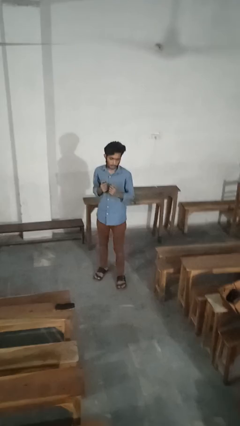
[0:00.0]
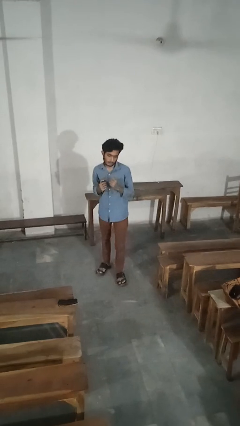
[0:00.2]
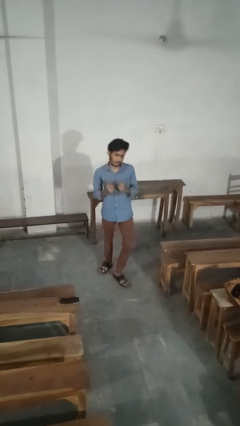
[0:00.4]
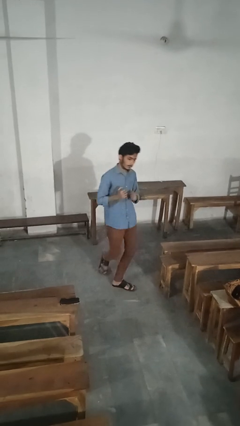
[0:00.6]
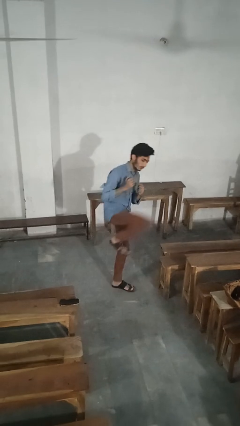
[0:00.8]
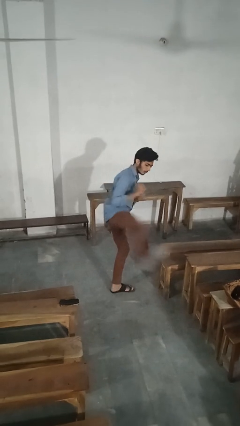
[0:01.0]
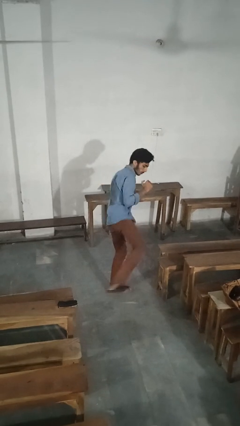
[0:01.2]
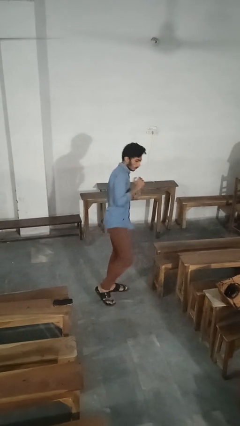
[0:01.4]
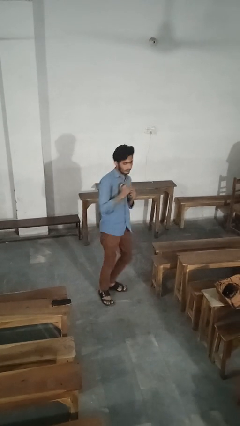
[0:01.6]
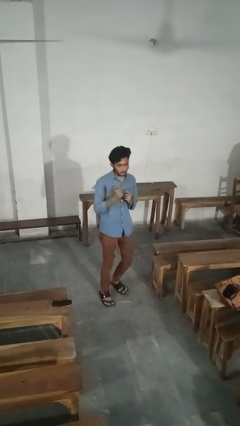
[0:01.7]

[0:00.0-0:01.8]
person karate kicks

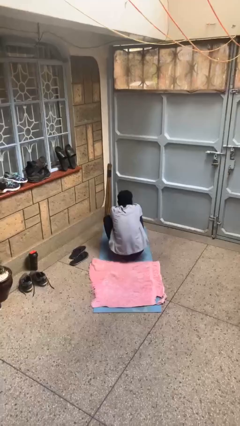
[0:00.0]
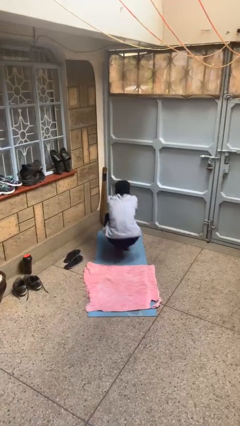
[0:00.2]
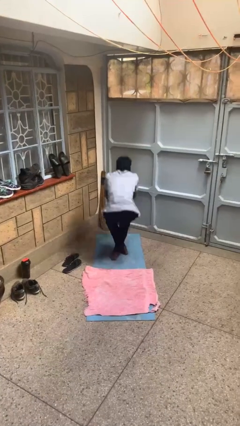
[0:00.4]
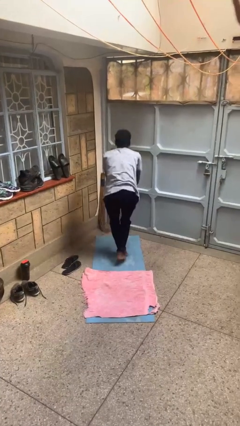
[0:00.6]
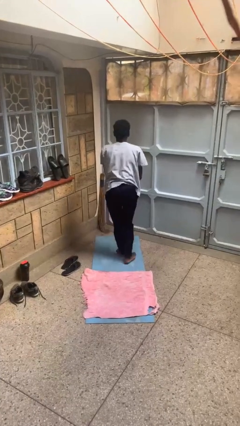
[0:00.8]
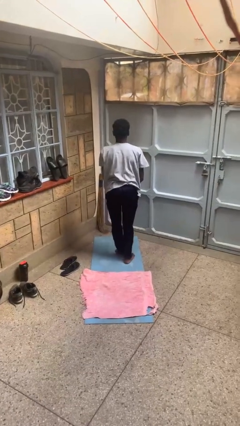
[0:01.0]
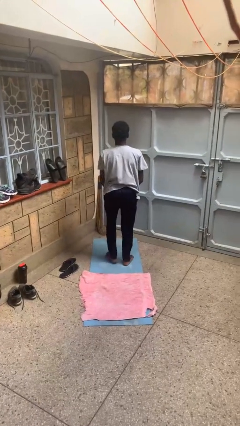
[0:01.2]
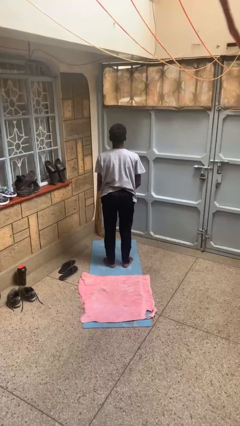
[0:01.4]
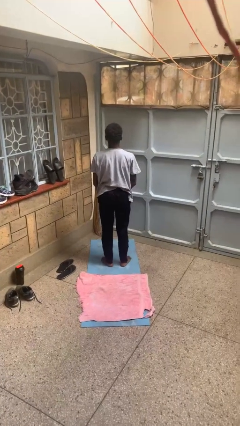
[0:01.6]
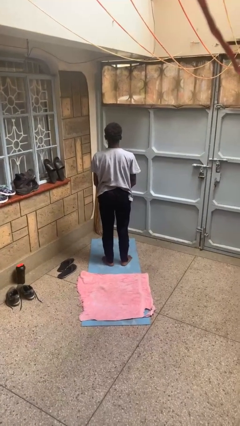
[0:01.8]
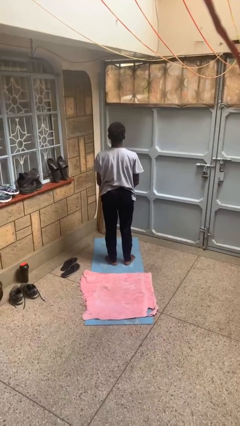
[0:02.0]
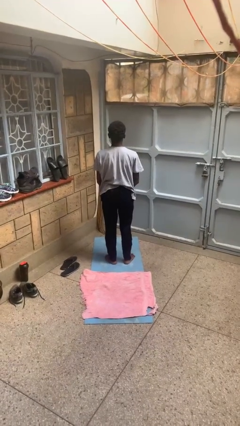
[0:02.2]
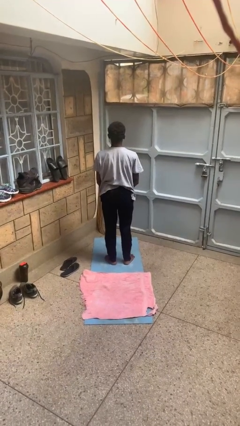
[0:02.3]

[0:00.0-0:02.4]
person stands up from floor

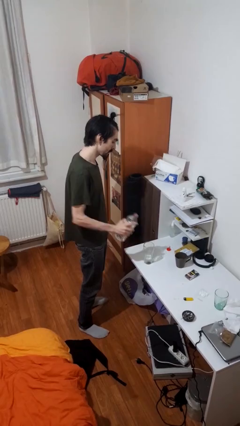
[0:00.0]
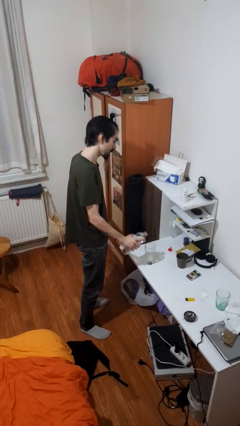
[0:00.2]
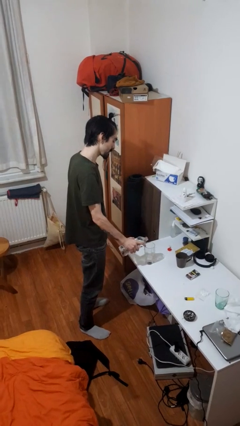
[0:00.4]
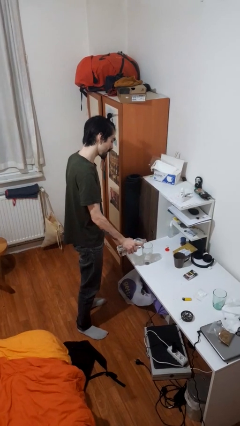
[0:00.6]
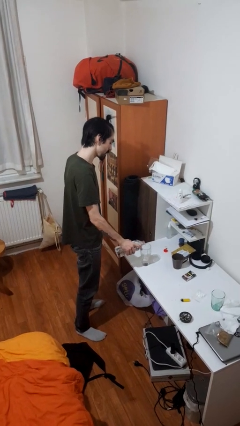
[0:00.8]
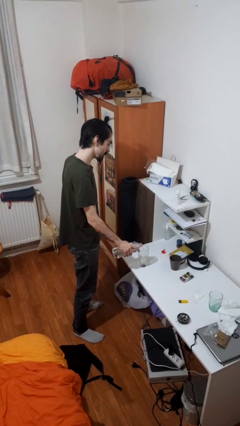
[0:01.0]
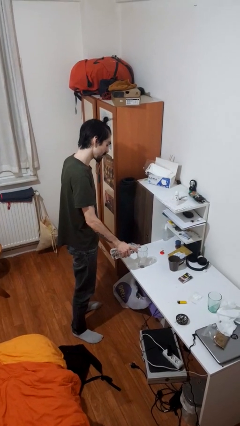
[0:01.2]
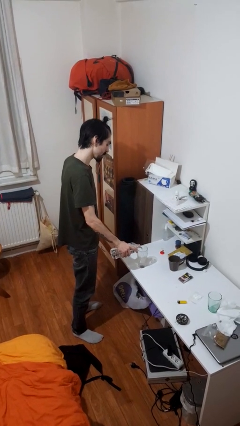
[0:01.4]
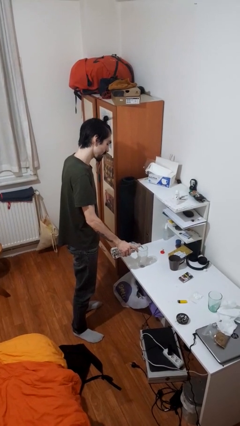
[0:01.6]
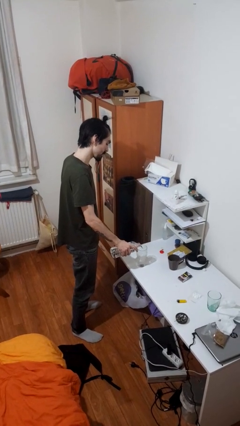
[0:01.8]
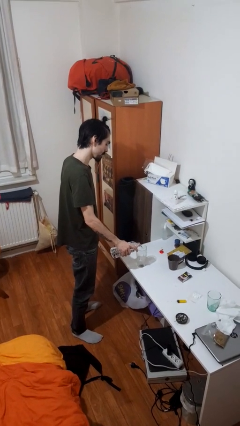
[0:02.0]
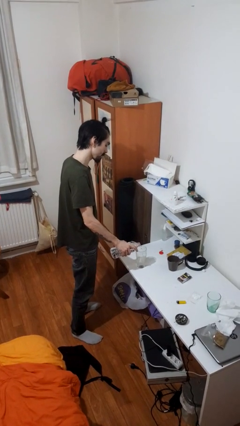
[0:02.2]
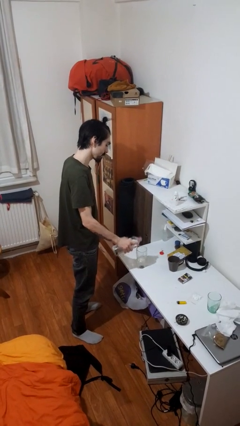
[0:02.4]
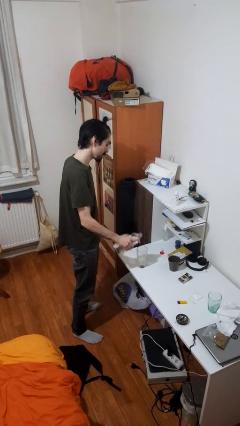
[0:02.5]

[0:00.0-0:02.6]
person pours liquid into cup

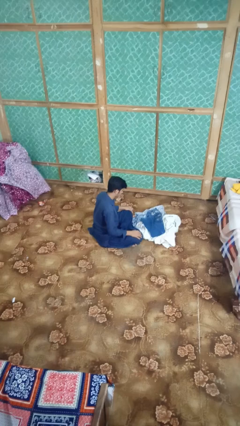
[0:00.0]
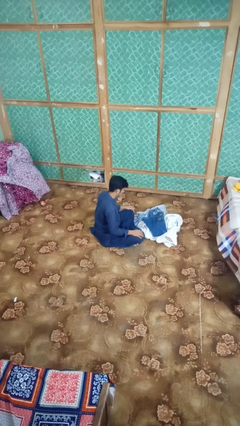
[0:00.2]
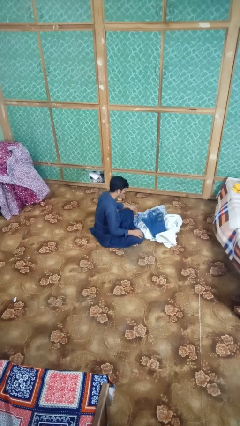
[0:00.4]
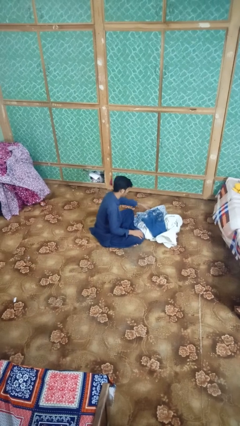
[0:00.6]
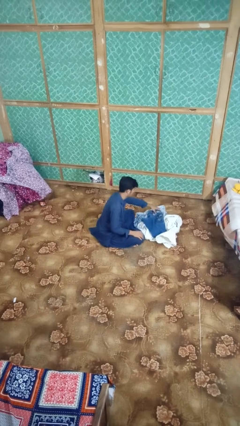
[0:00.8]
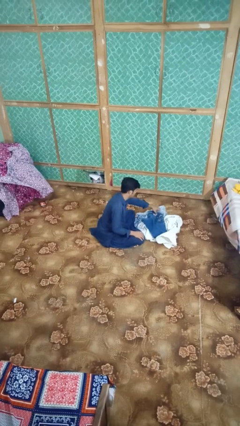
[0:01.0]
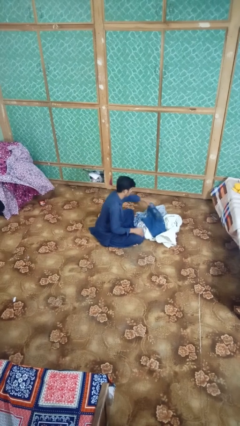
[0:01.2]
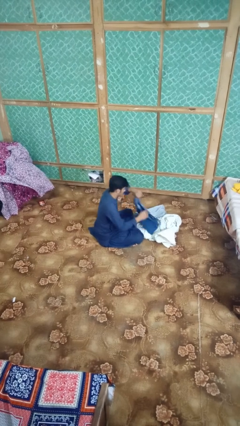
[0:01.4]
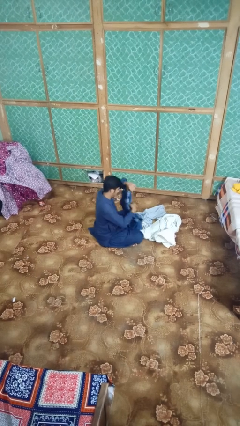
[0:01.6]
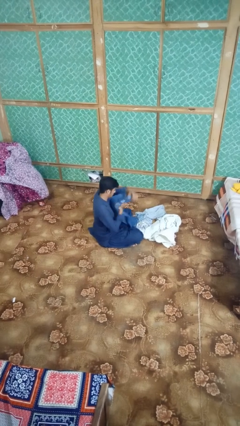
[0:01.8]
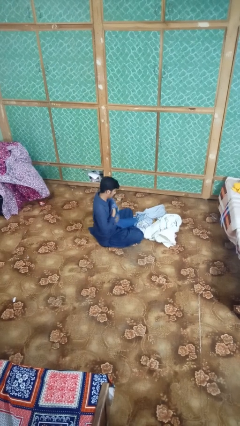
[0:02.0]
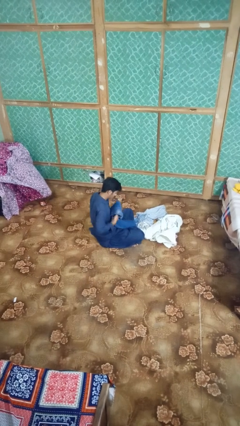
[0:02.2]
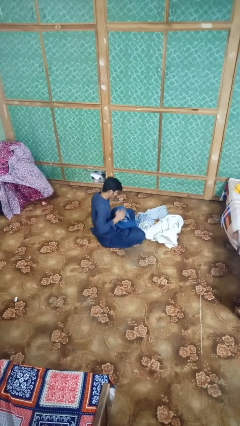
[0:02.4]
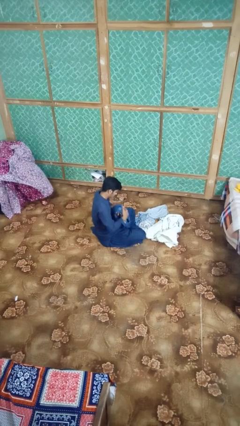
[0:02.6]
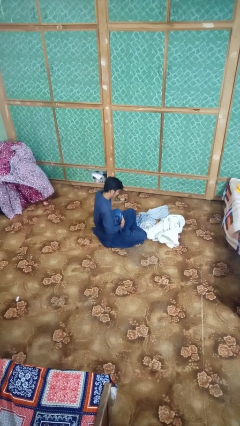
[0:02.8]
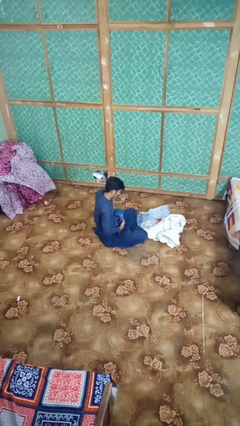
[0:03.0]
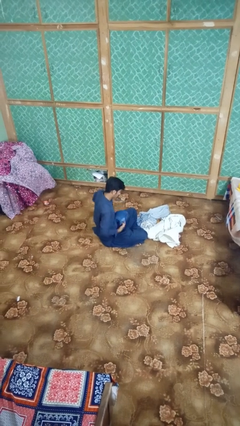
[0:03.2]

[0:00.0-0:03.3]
person folds pants

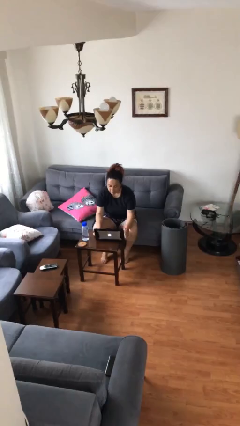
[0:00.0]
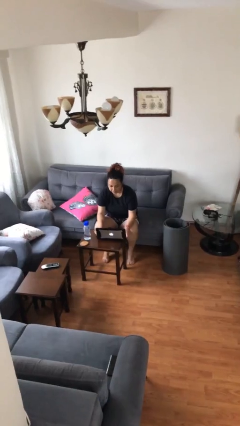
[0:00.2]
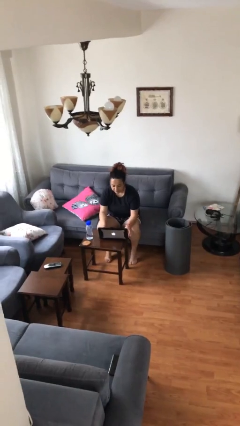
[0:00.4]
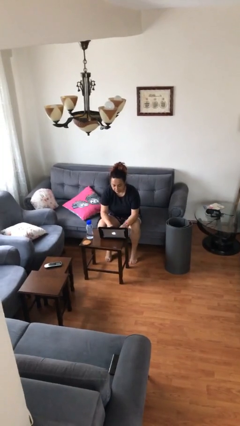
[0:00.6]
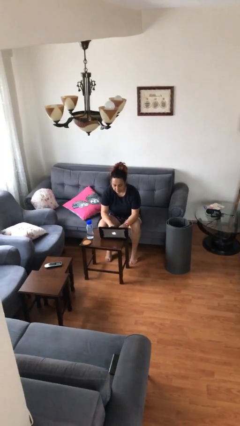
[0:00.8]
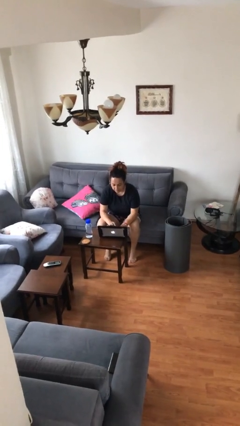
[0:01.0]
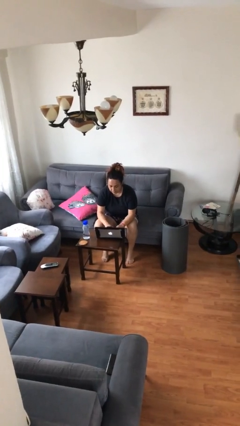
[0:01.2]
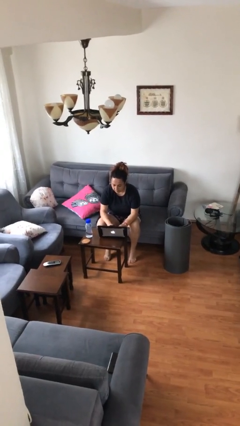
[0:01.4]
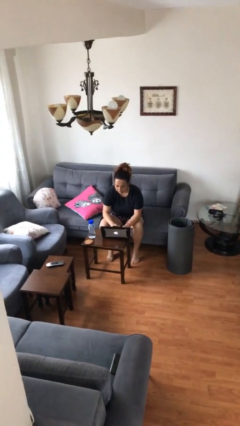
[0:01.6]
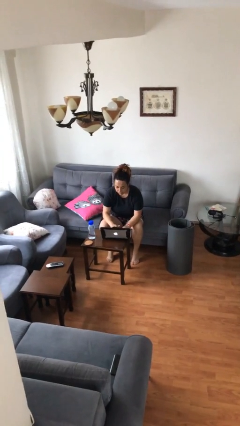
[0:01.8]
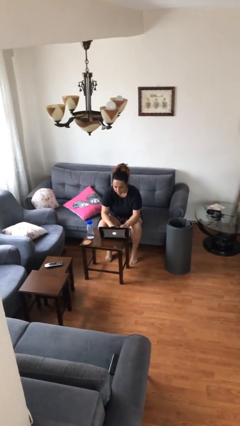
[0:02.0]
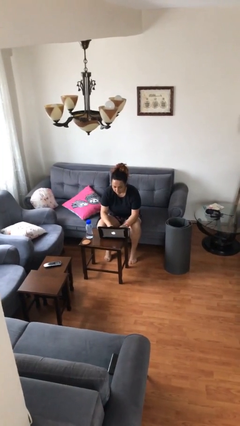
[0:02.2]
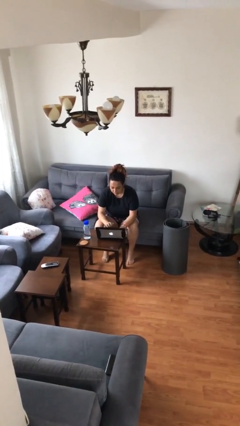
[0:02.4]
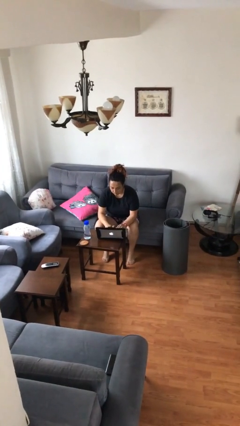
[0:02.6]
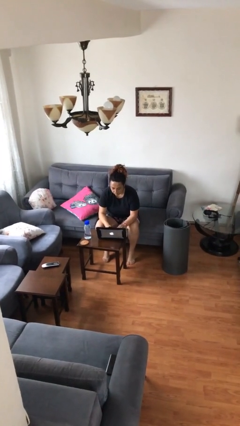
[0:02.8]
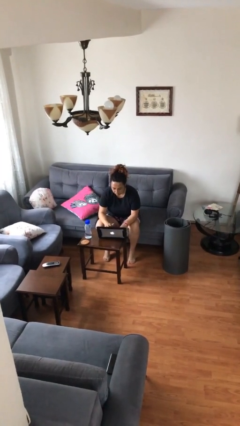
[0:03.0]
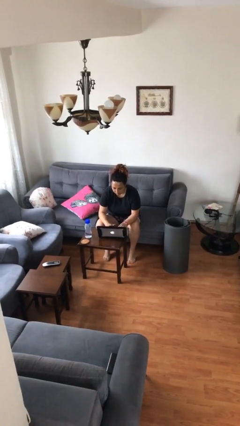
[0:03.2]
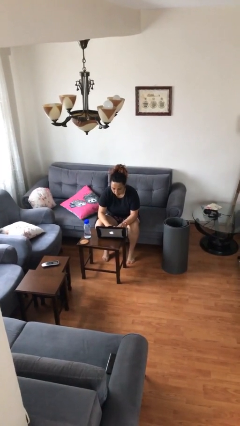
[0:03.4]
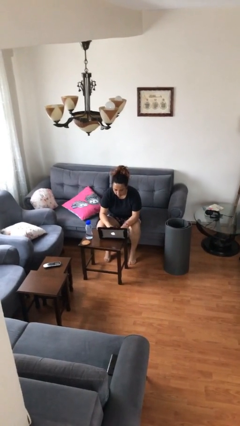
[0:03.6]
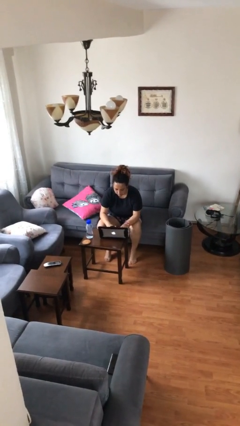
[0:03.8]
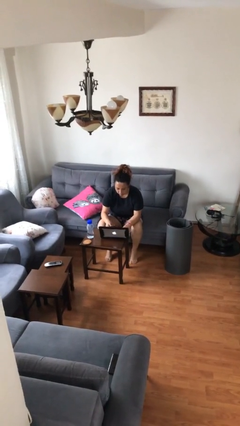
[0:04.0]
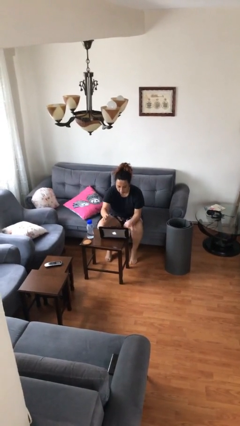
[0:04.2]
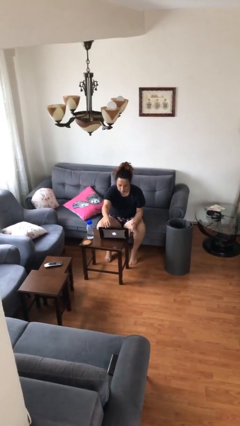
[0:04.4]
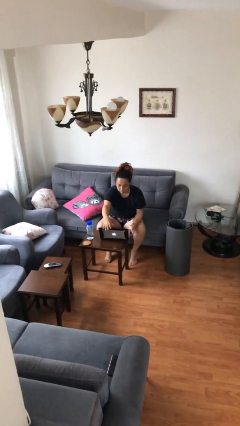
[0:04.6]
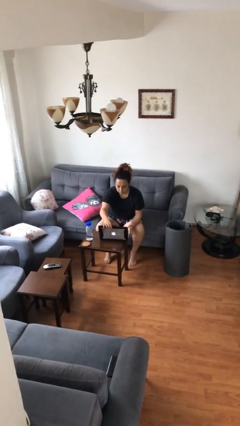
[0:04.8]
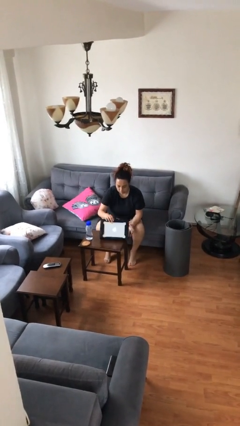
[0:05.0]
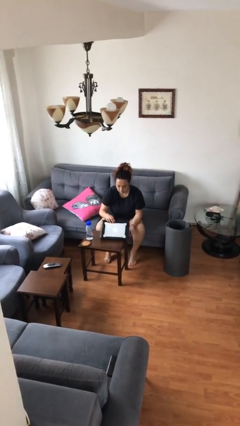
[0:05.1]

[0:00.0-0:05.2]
person interacts with laptop

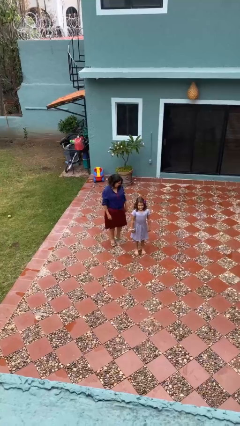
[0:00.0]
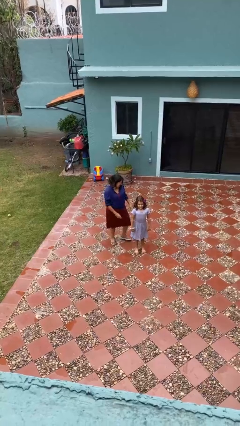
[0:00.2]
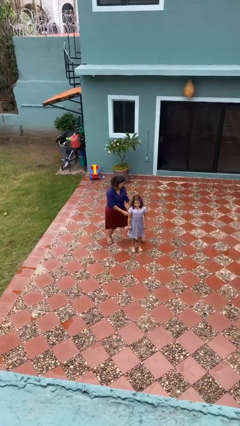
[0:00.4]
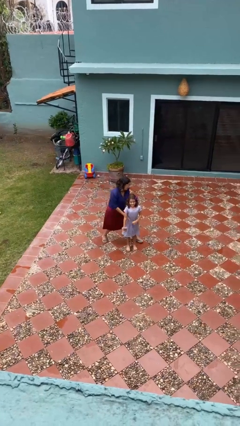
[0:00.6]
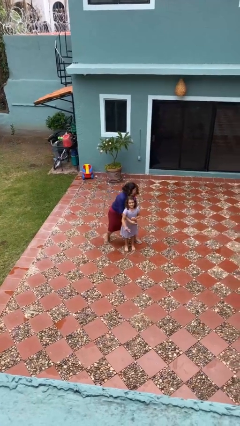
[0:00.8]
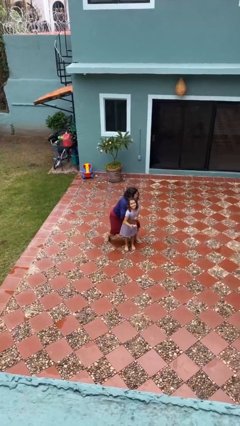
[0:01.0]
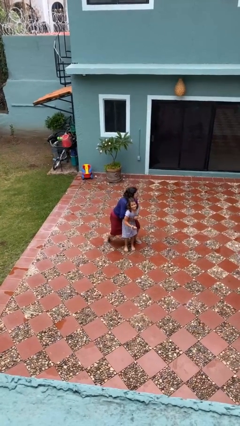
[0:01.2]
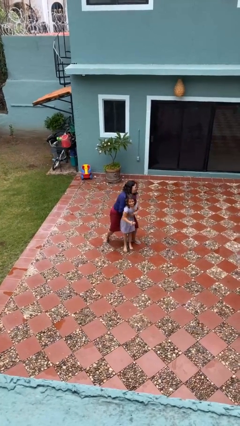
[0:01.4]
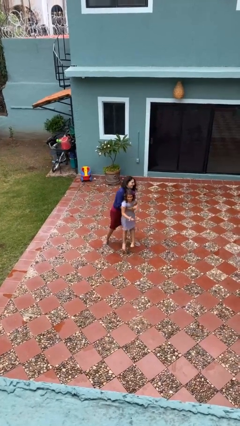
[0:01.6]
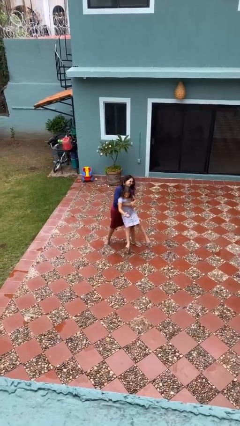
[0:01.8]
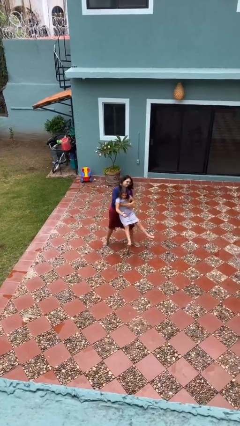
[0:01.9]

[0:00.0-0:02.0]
person picks up person
